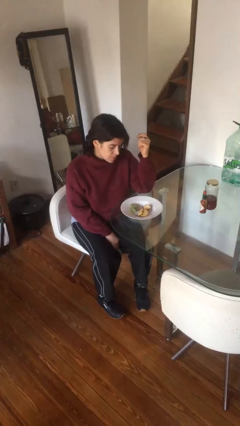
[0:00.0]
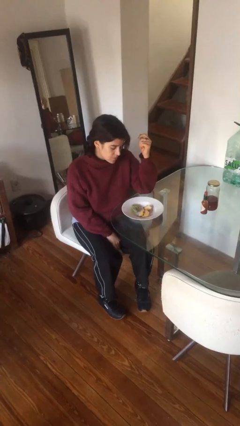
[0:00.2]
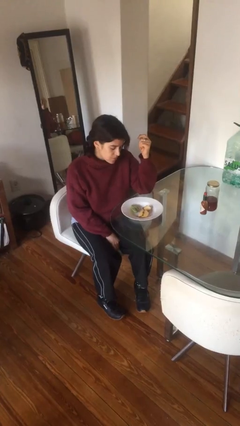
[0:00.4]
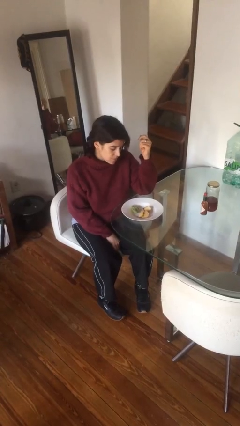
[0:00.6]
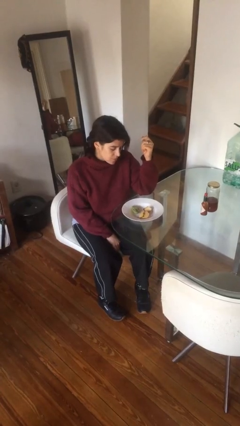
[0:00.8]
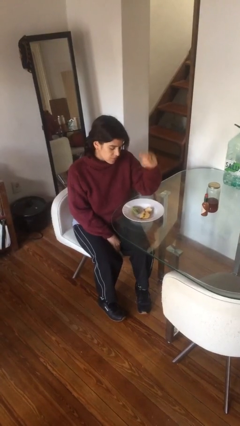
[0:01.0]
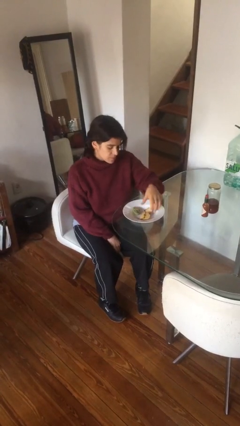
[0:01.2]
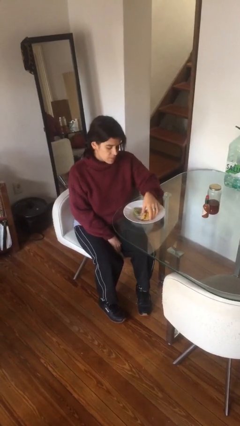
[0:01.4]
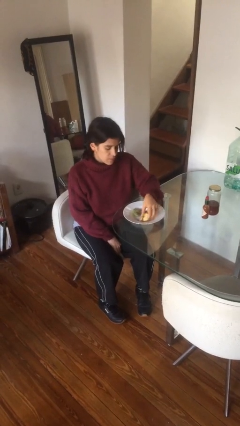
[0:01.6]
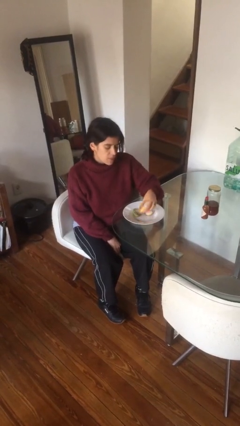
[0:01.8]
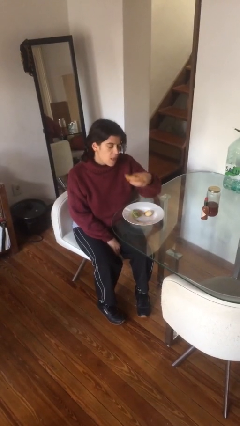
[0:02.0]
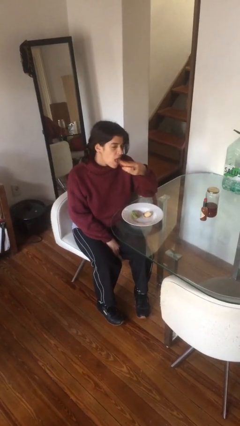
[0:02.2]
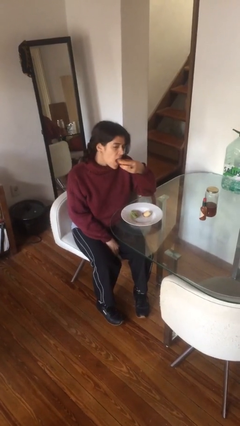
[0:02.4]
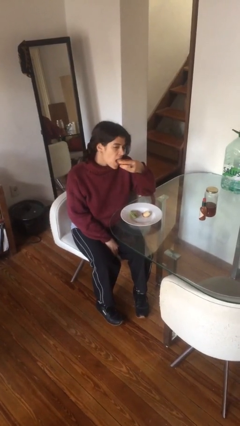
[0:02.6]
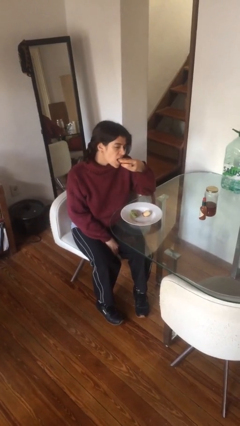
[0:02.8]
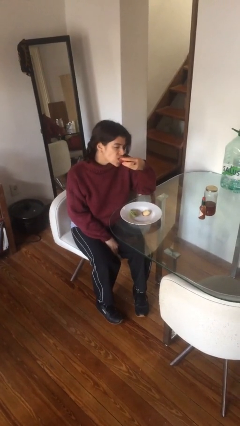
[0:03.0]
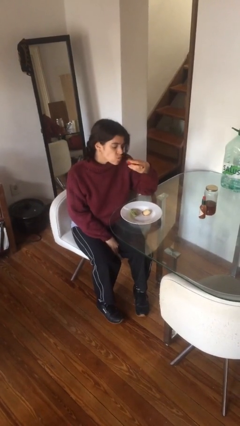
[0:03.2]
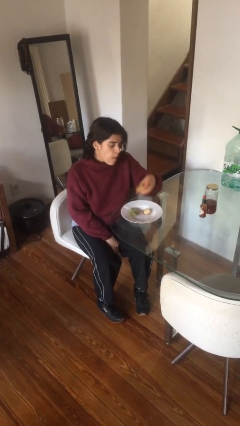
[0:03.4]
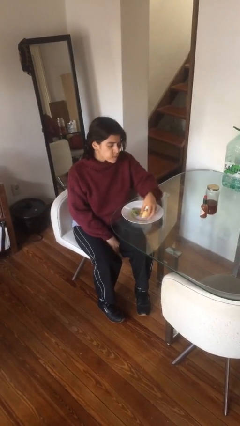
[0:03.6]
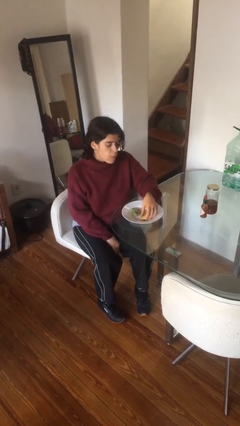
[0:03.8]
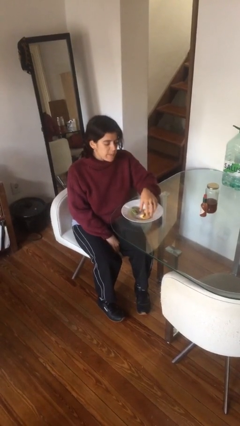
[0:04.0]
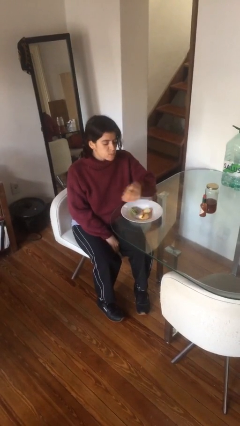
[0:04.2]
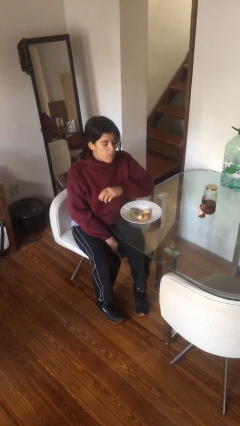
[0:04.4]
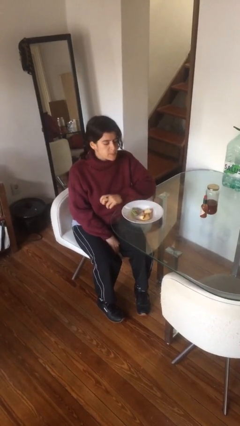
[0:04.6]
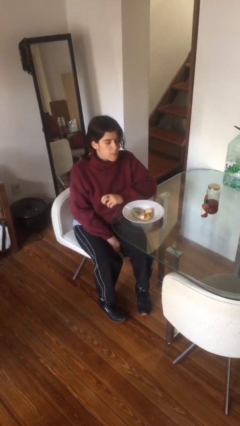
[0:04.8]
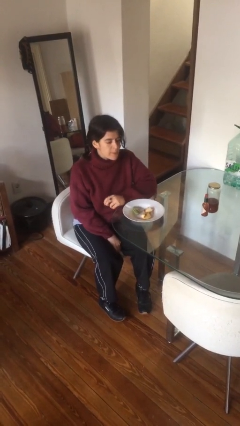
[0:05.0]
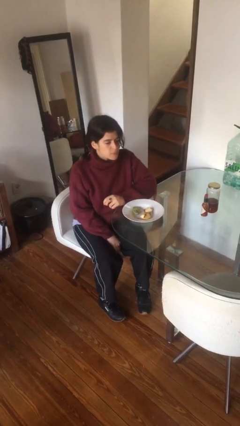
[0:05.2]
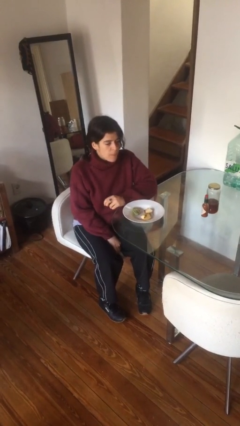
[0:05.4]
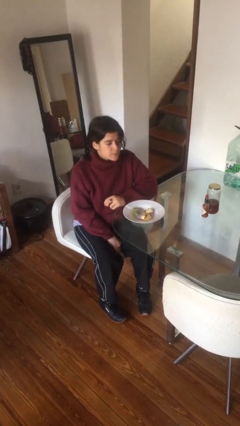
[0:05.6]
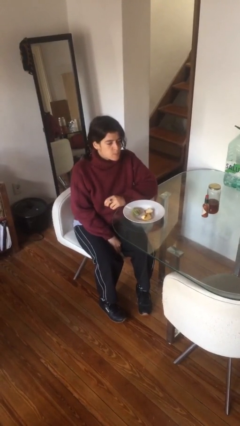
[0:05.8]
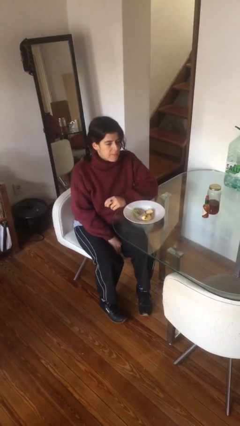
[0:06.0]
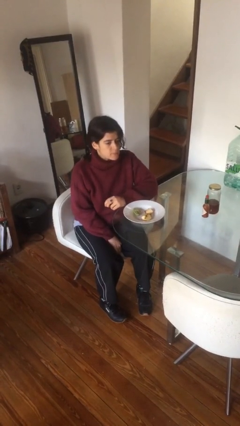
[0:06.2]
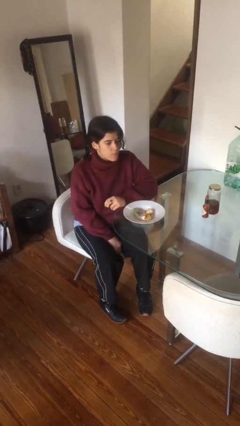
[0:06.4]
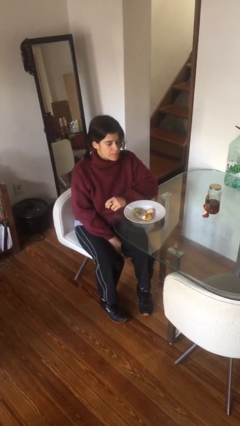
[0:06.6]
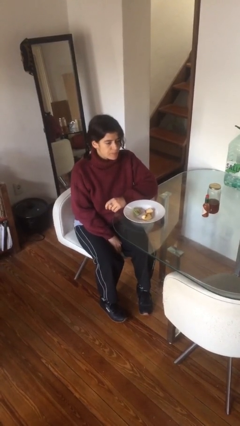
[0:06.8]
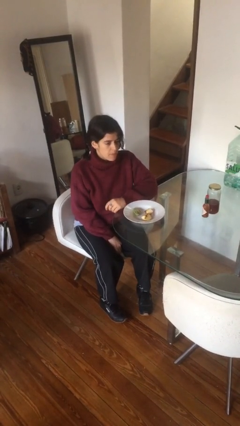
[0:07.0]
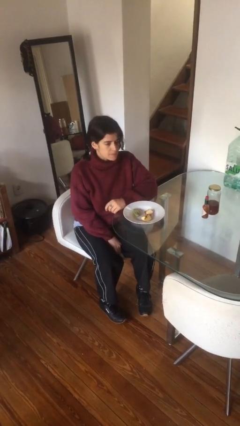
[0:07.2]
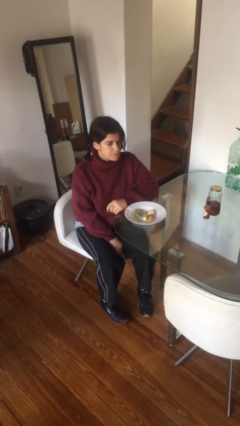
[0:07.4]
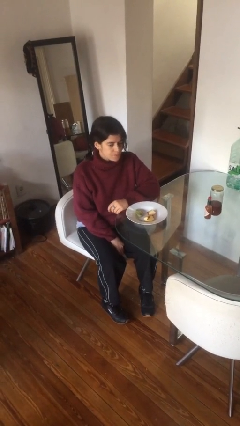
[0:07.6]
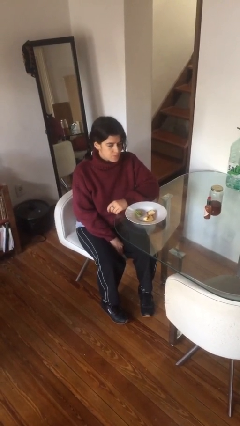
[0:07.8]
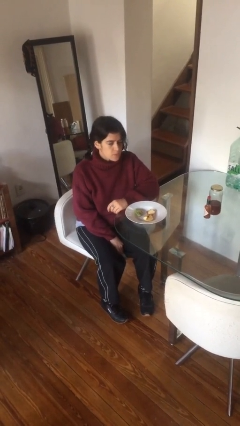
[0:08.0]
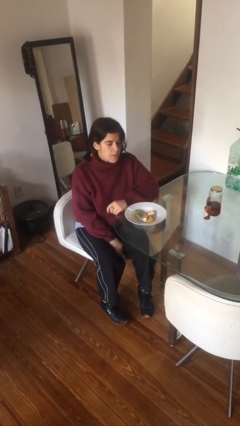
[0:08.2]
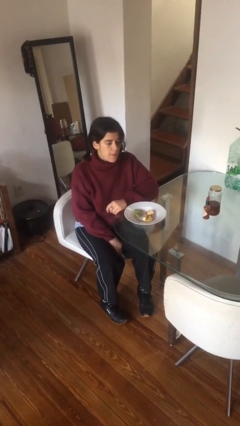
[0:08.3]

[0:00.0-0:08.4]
person eats with hands

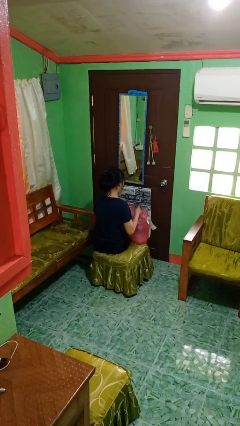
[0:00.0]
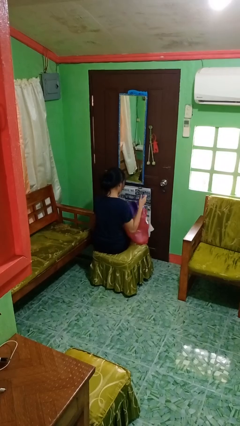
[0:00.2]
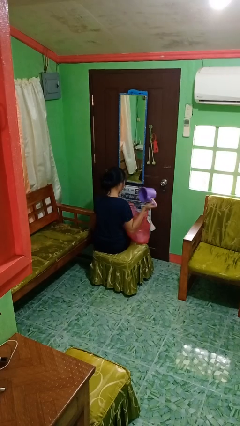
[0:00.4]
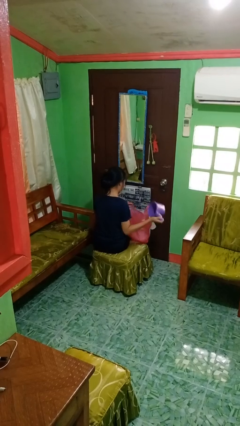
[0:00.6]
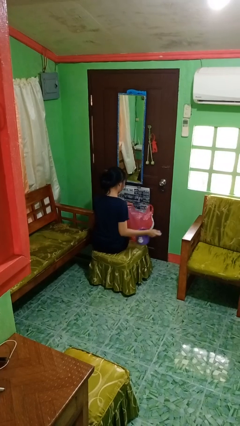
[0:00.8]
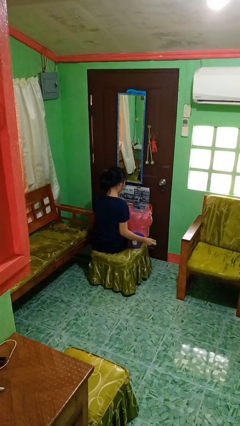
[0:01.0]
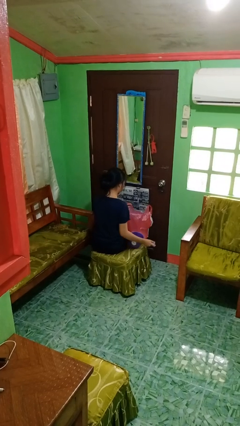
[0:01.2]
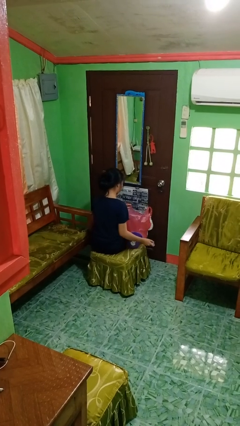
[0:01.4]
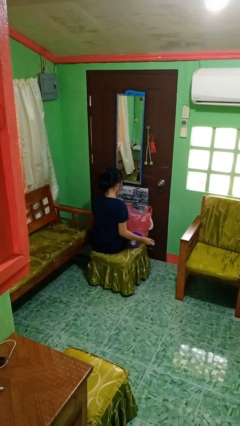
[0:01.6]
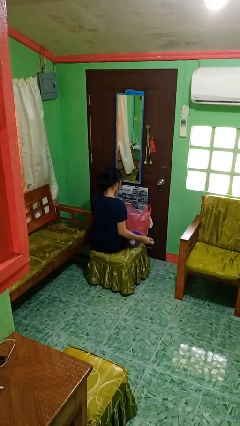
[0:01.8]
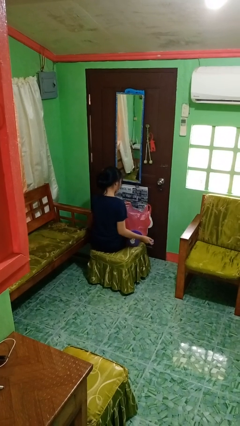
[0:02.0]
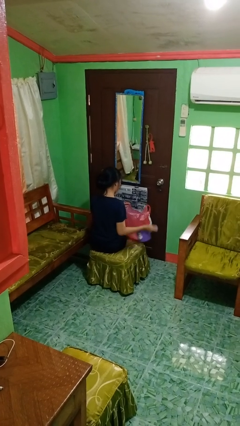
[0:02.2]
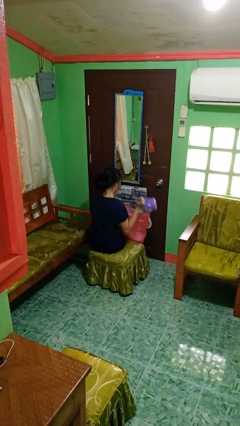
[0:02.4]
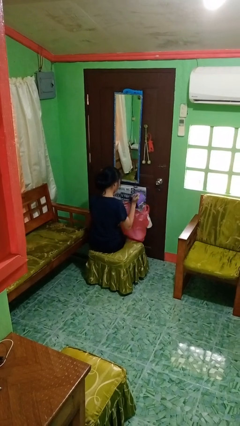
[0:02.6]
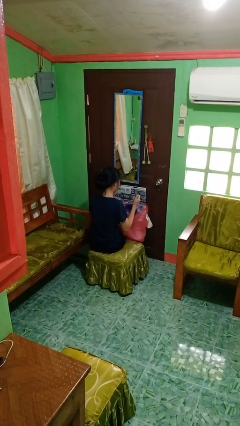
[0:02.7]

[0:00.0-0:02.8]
person takes object from bag

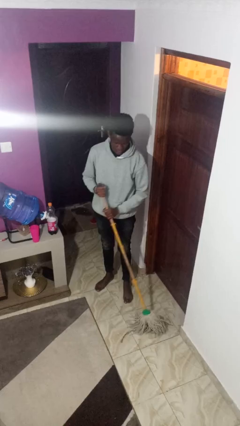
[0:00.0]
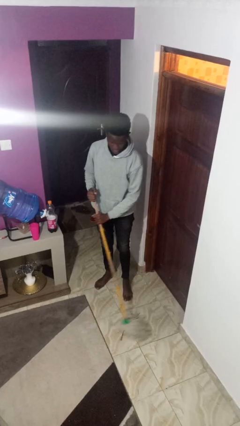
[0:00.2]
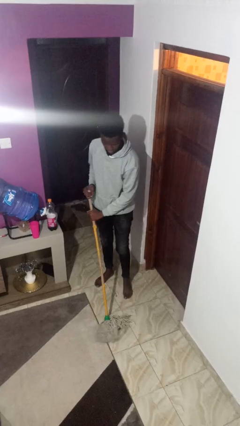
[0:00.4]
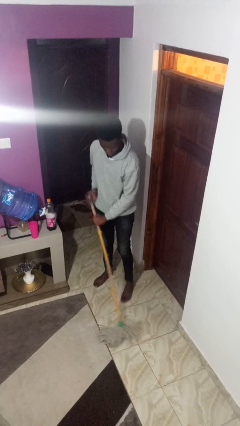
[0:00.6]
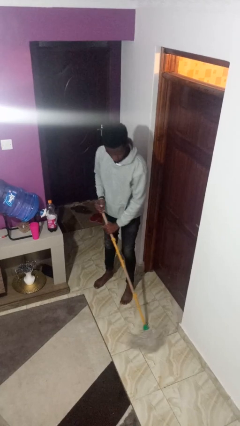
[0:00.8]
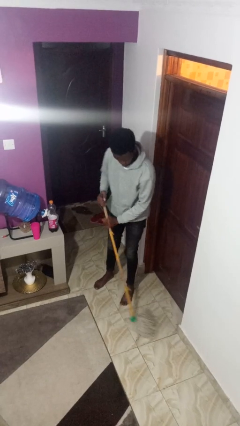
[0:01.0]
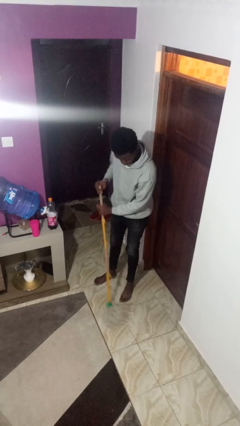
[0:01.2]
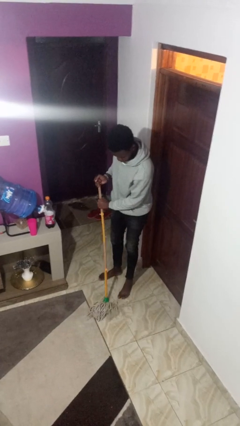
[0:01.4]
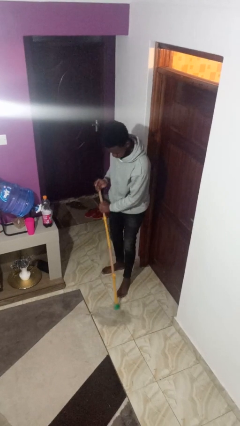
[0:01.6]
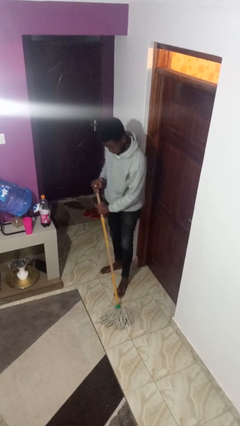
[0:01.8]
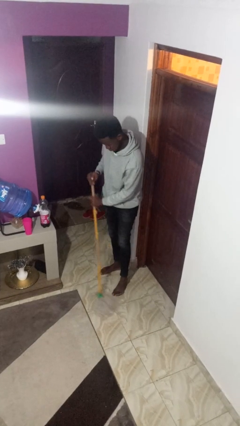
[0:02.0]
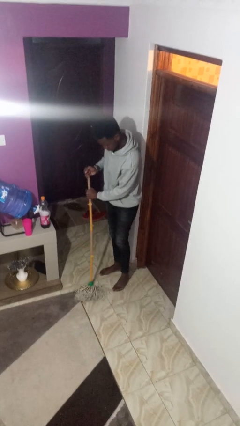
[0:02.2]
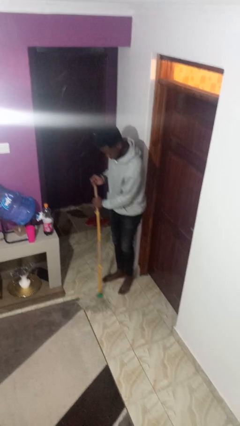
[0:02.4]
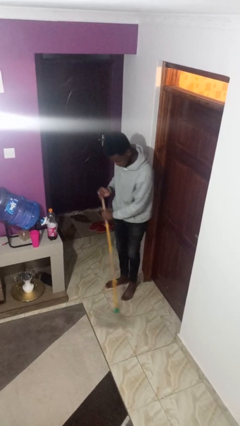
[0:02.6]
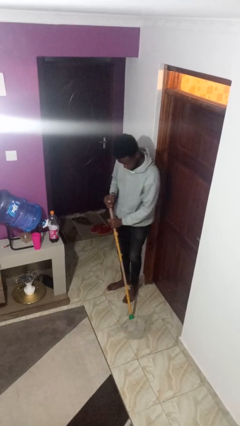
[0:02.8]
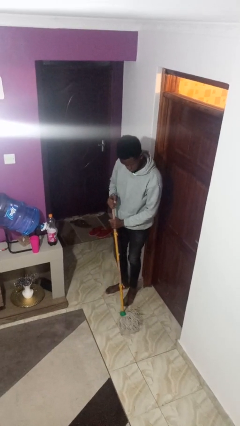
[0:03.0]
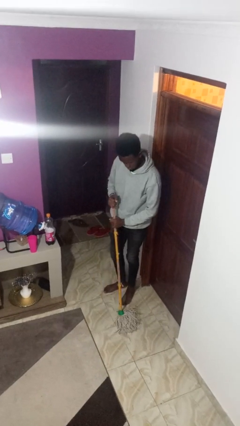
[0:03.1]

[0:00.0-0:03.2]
person mops

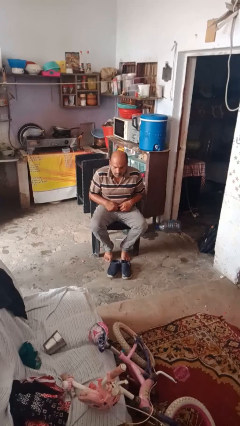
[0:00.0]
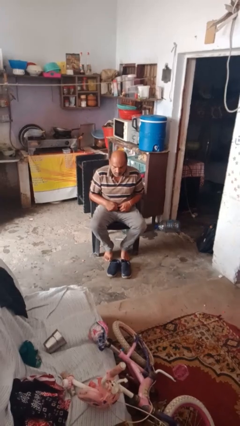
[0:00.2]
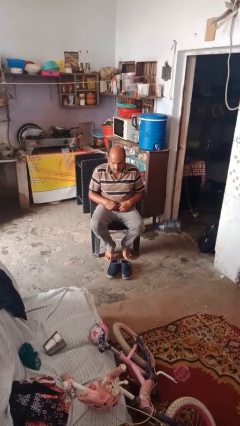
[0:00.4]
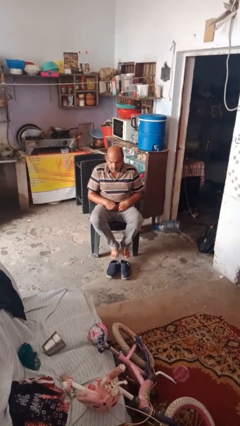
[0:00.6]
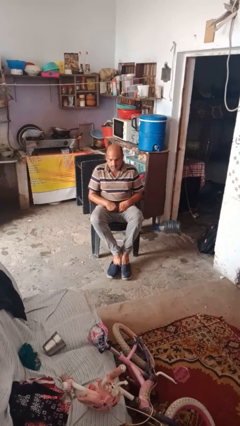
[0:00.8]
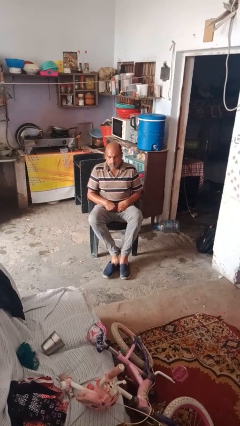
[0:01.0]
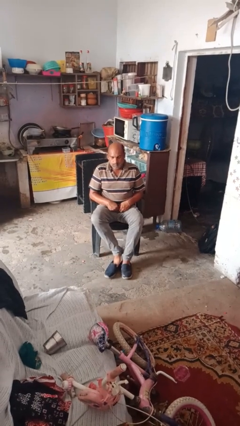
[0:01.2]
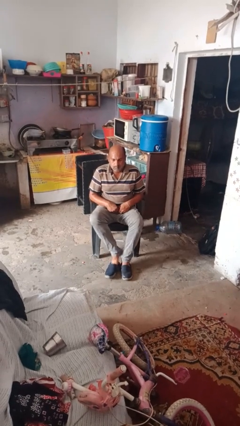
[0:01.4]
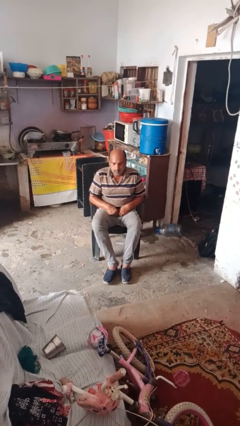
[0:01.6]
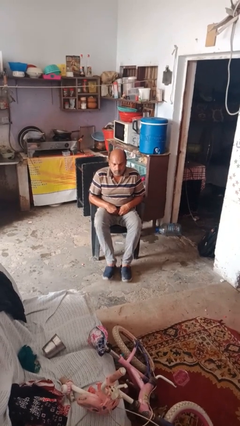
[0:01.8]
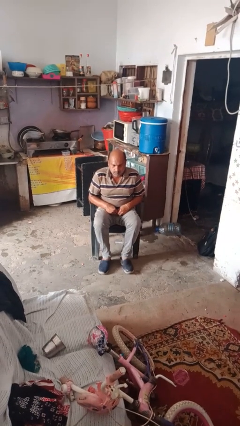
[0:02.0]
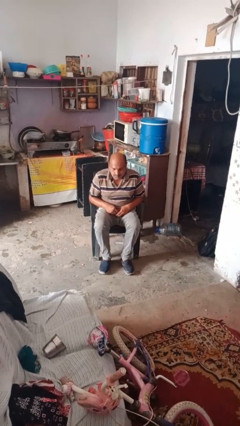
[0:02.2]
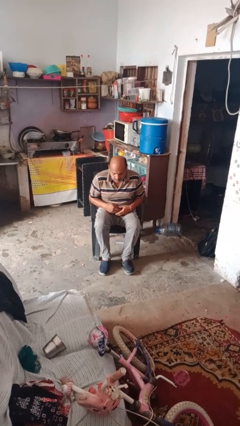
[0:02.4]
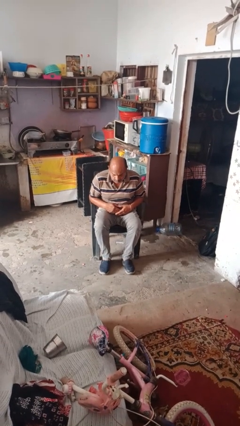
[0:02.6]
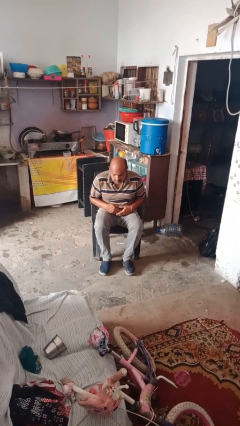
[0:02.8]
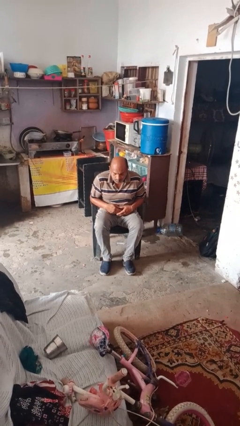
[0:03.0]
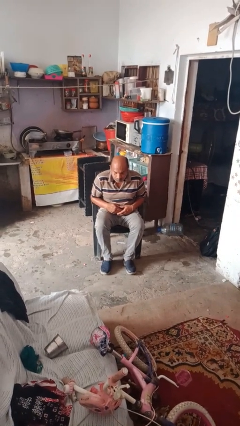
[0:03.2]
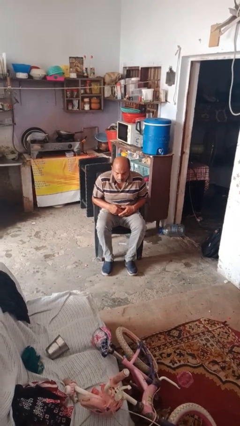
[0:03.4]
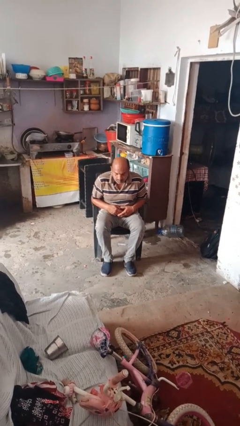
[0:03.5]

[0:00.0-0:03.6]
person puts on shoes
